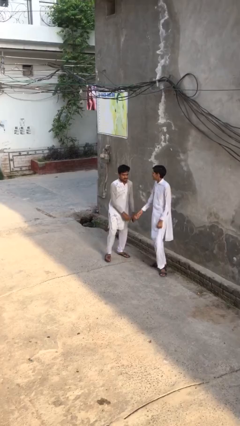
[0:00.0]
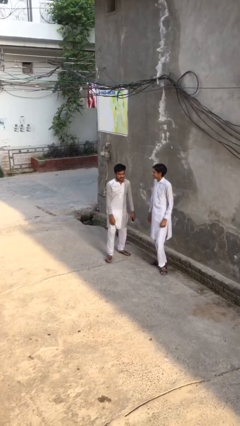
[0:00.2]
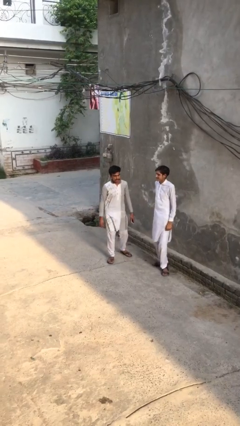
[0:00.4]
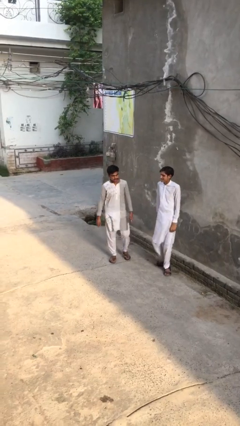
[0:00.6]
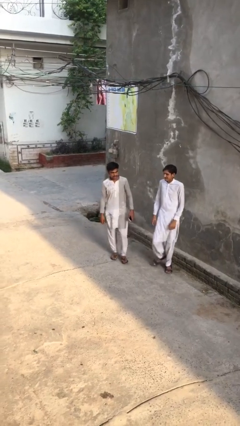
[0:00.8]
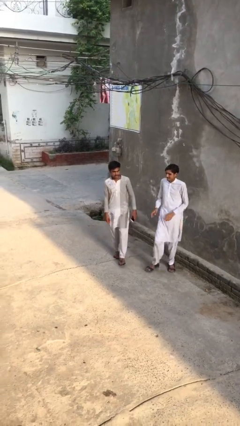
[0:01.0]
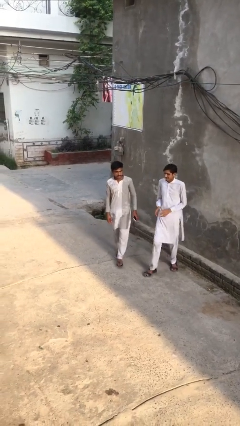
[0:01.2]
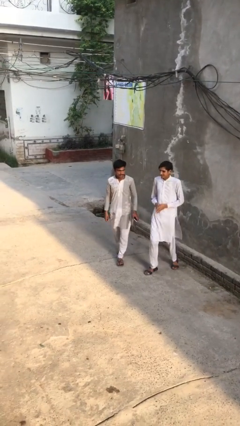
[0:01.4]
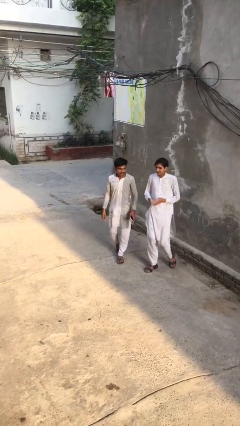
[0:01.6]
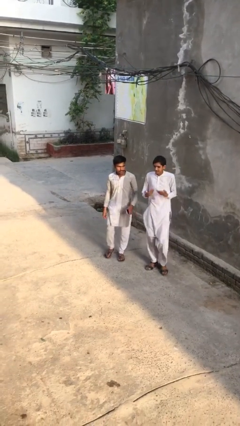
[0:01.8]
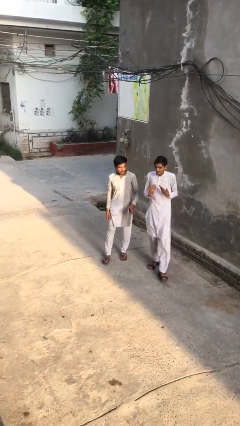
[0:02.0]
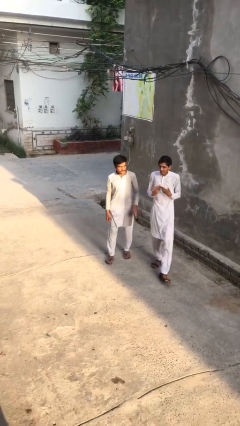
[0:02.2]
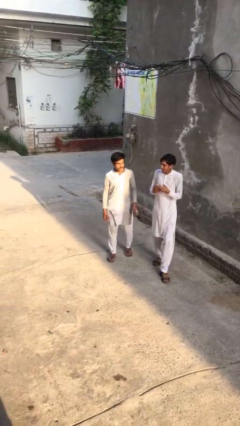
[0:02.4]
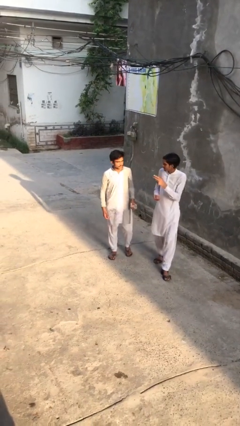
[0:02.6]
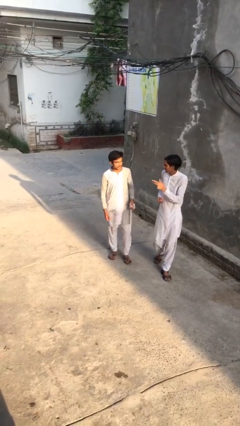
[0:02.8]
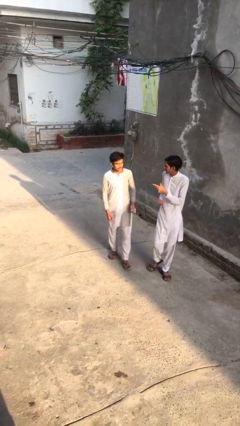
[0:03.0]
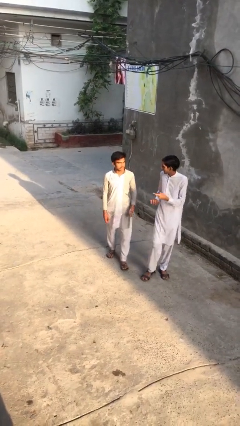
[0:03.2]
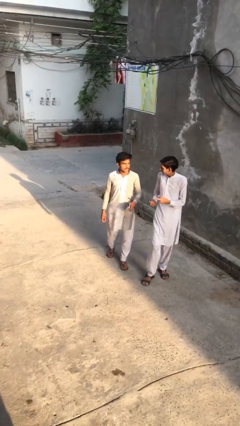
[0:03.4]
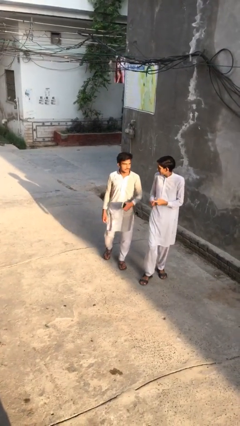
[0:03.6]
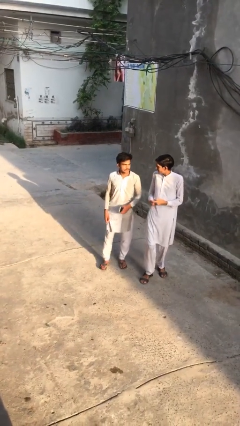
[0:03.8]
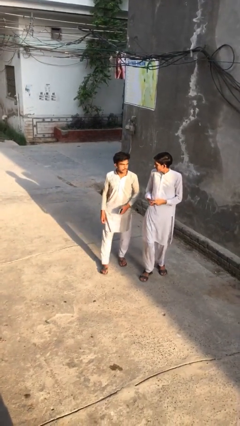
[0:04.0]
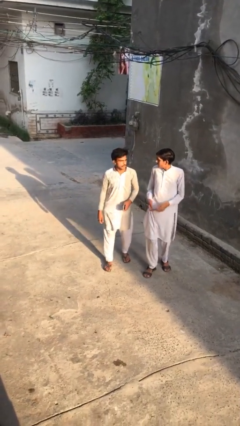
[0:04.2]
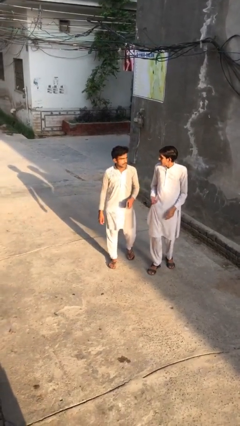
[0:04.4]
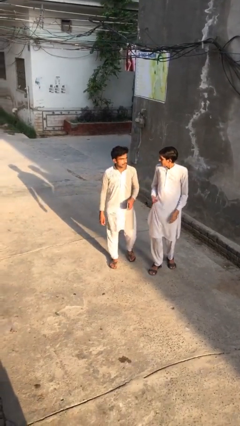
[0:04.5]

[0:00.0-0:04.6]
person talks to person

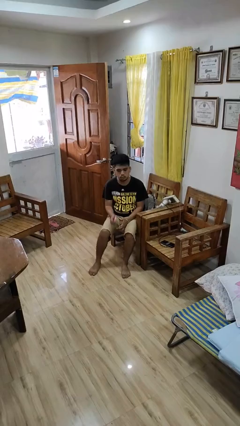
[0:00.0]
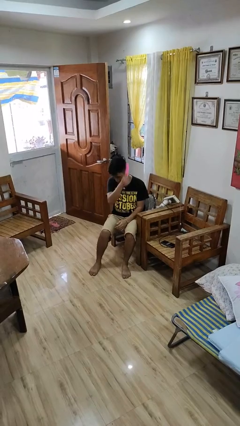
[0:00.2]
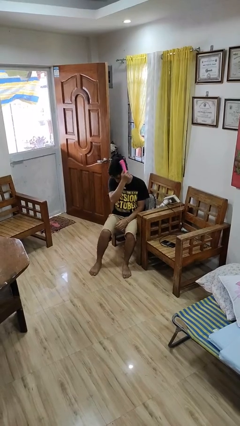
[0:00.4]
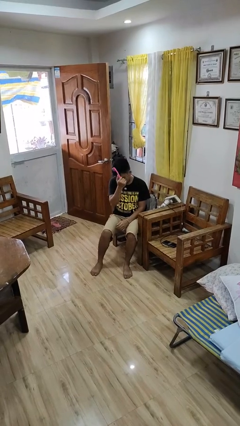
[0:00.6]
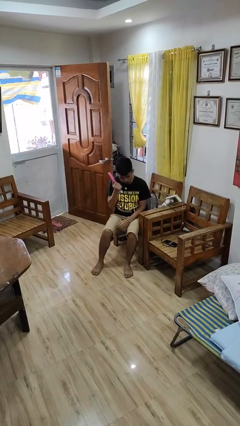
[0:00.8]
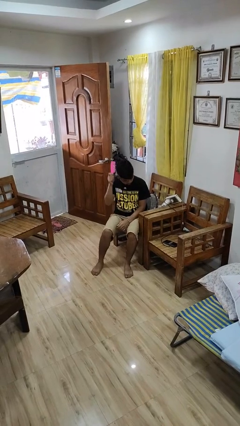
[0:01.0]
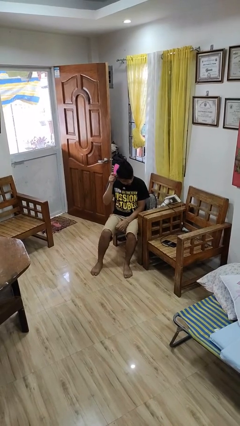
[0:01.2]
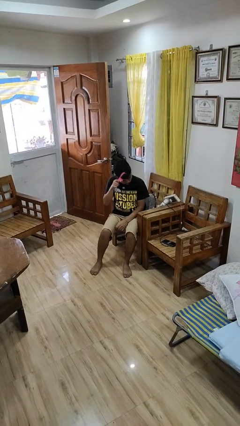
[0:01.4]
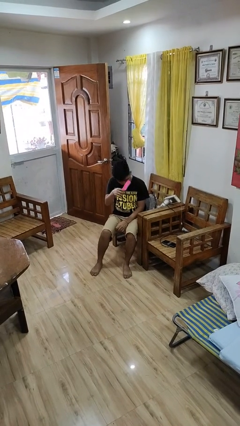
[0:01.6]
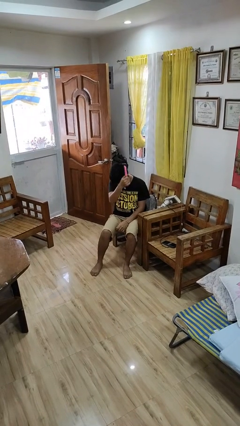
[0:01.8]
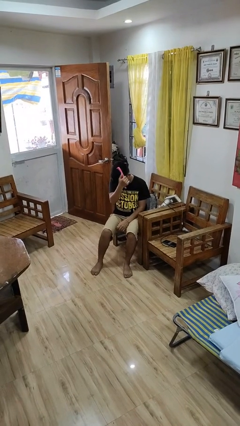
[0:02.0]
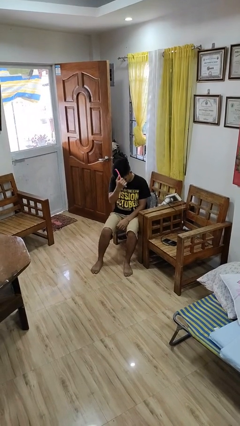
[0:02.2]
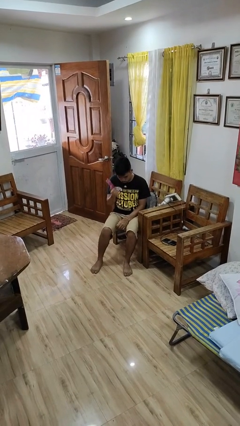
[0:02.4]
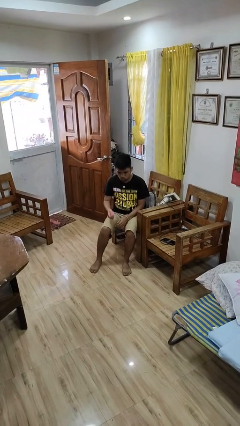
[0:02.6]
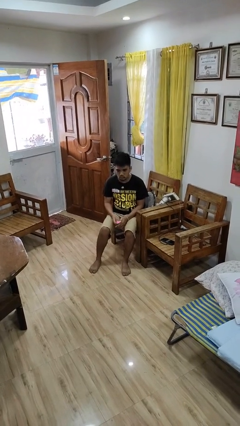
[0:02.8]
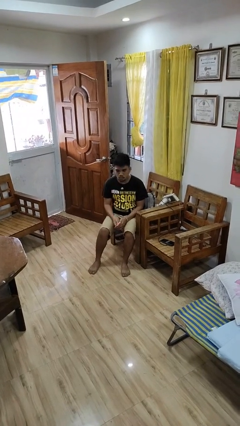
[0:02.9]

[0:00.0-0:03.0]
person brushes hair

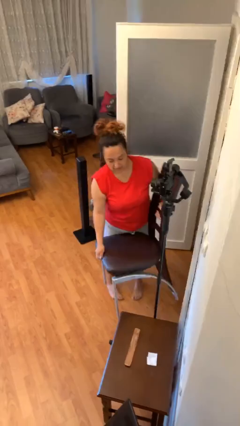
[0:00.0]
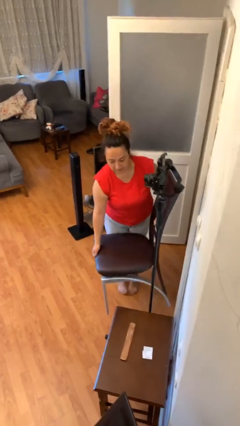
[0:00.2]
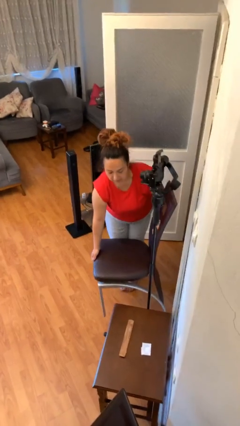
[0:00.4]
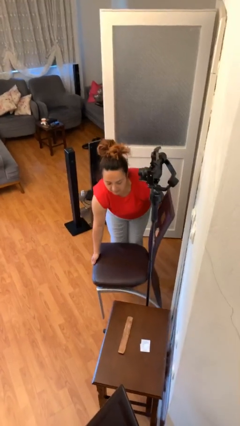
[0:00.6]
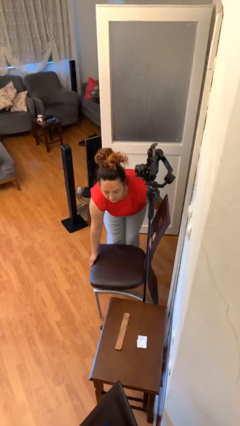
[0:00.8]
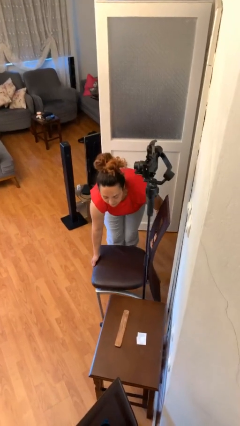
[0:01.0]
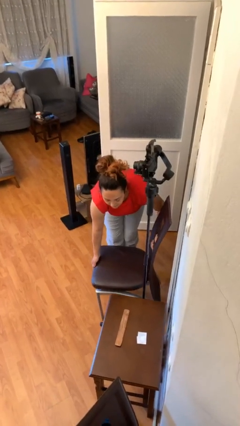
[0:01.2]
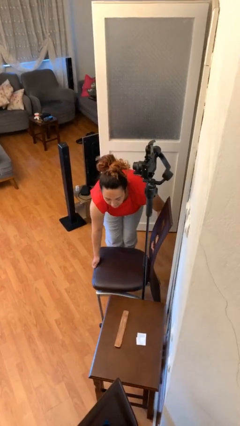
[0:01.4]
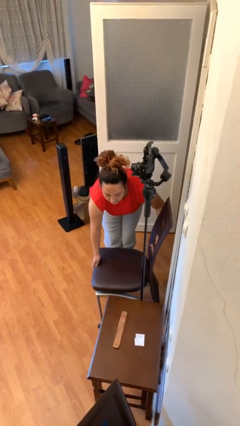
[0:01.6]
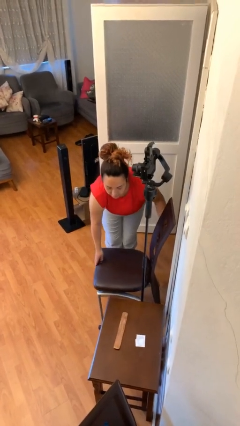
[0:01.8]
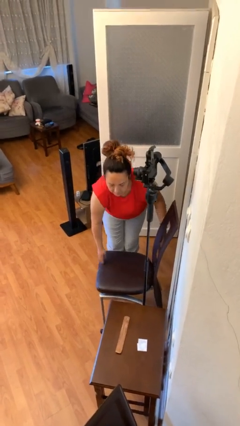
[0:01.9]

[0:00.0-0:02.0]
person puts down object on floor

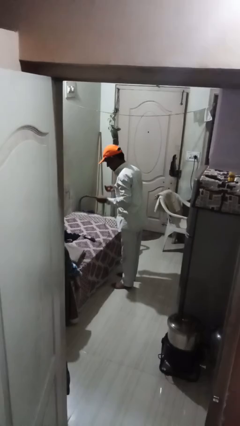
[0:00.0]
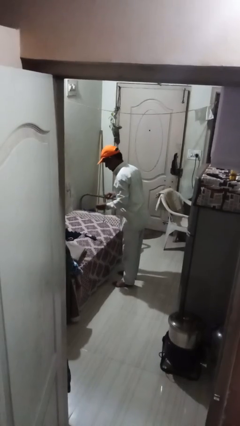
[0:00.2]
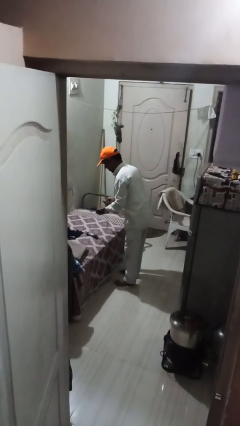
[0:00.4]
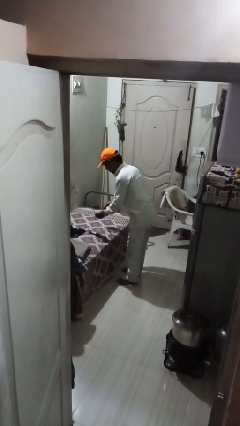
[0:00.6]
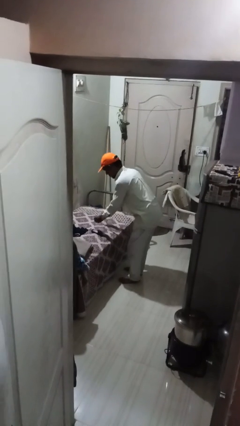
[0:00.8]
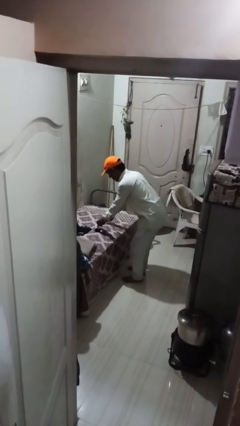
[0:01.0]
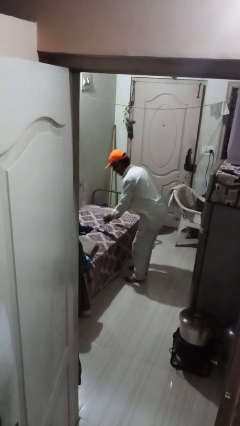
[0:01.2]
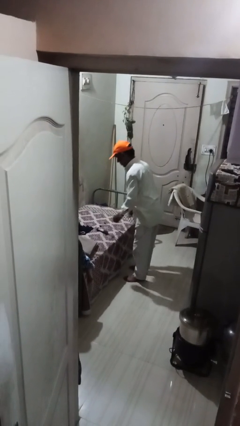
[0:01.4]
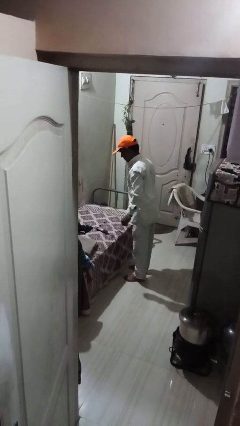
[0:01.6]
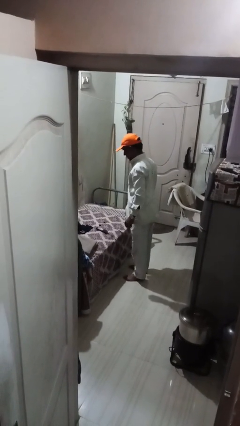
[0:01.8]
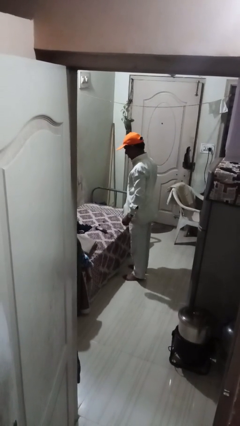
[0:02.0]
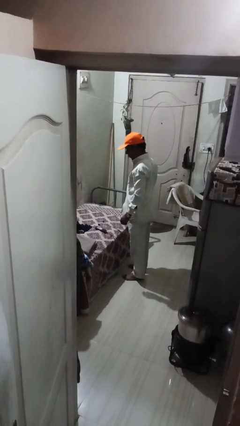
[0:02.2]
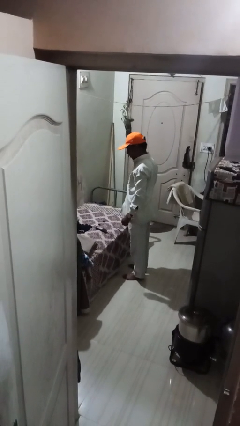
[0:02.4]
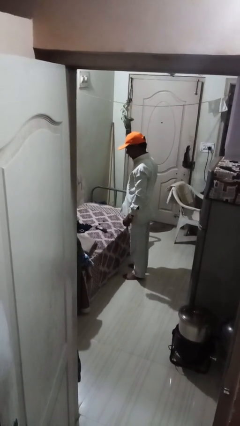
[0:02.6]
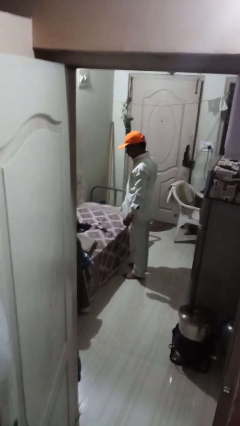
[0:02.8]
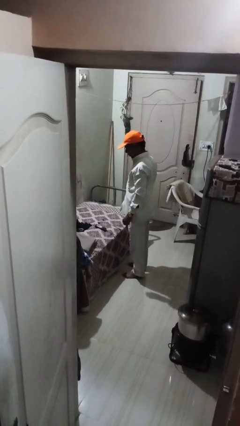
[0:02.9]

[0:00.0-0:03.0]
person takes off headphones

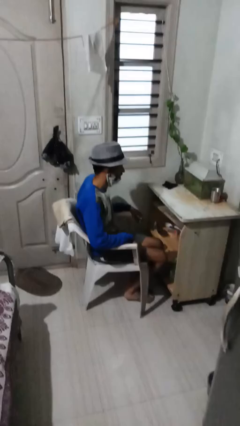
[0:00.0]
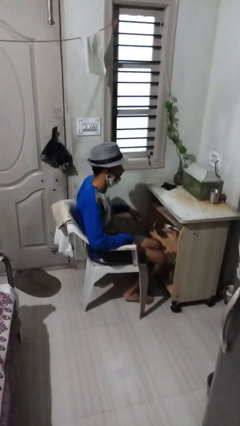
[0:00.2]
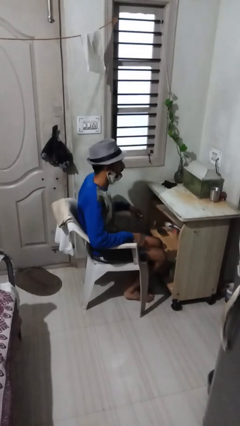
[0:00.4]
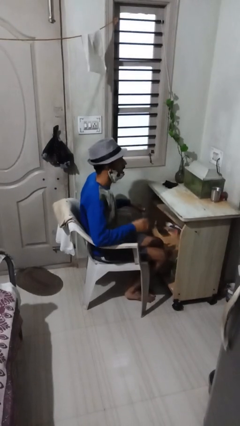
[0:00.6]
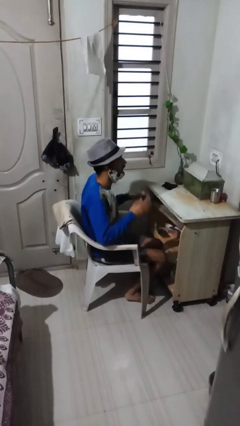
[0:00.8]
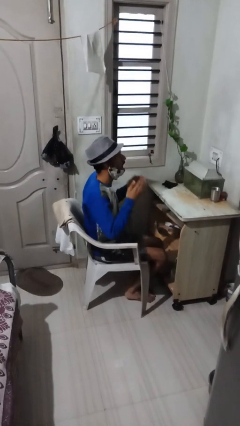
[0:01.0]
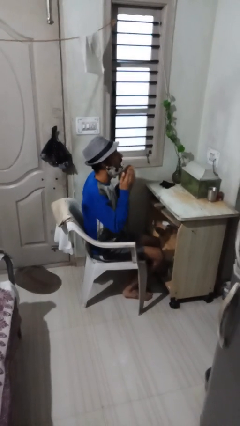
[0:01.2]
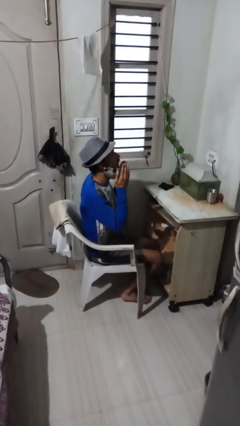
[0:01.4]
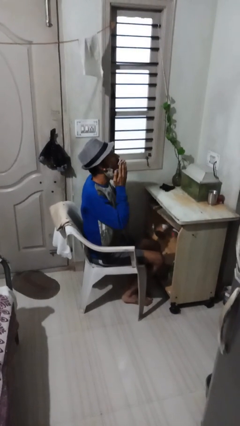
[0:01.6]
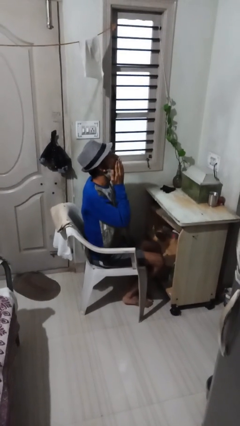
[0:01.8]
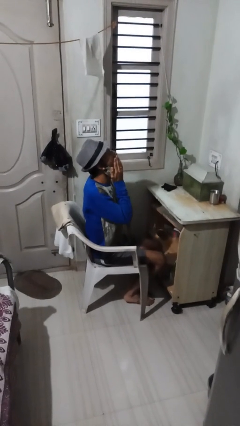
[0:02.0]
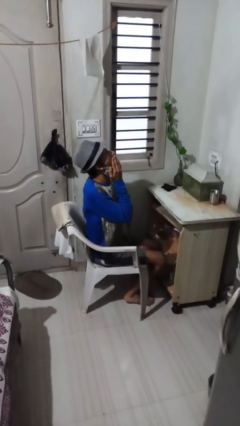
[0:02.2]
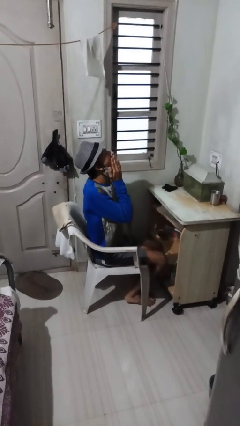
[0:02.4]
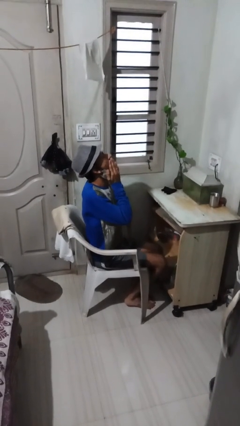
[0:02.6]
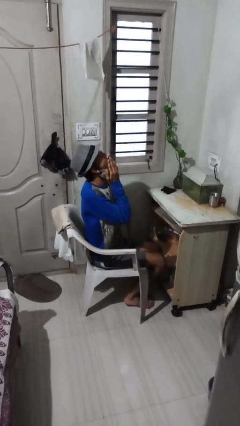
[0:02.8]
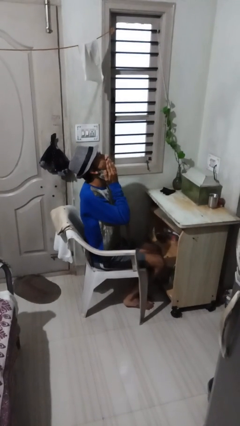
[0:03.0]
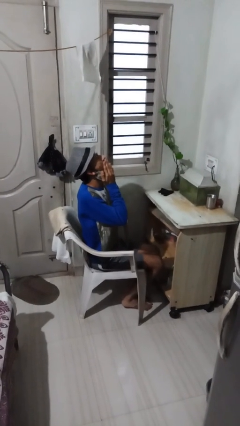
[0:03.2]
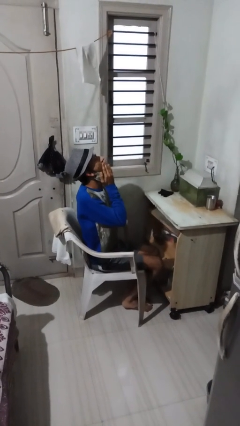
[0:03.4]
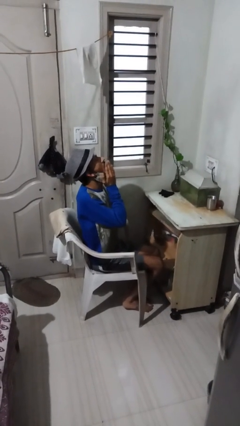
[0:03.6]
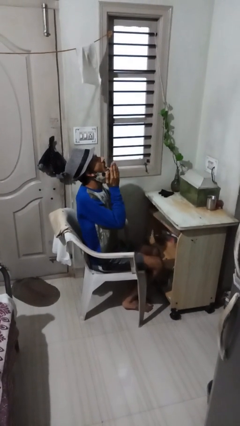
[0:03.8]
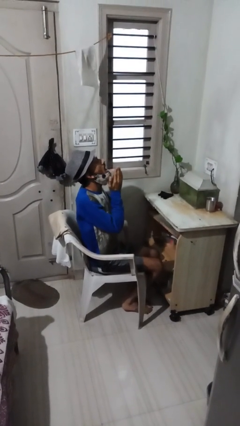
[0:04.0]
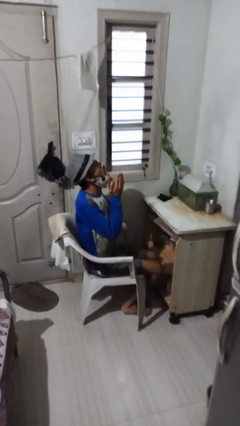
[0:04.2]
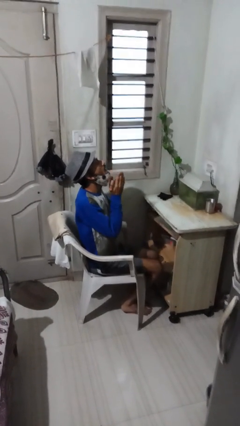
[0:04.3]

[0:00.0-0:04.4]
person yawns

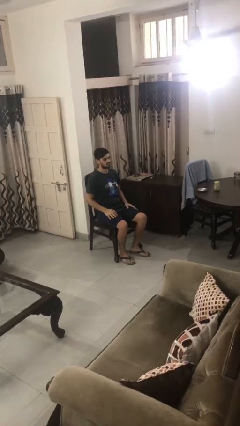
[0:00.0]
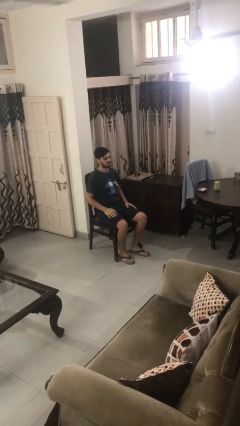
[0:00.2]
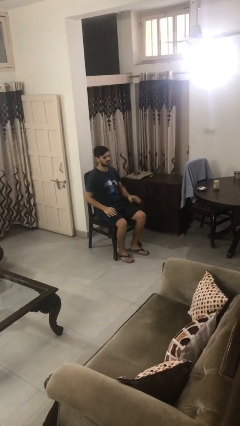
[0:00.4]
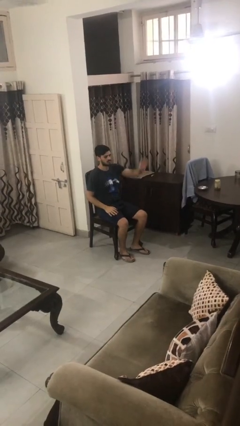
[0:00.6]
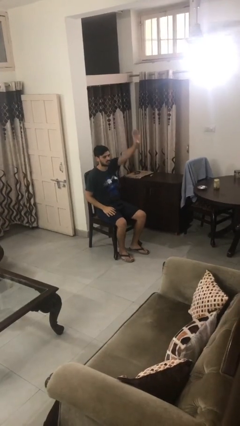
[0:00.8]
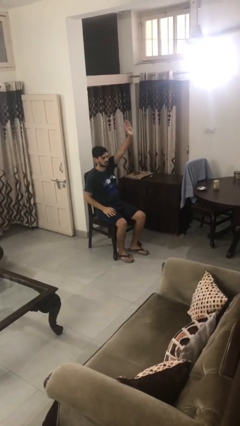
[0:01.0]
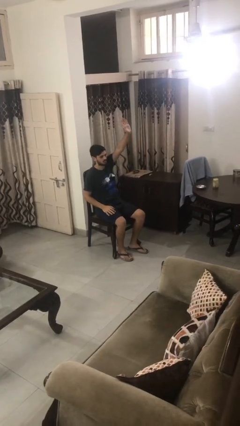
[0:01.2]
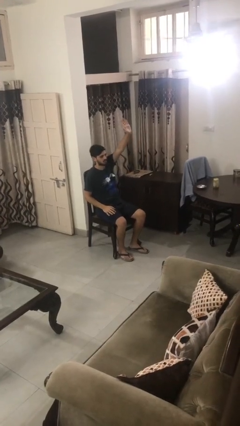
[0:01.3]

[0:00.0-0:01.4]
person gestures raise hand
